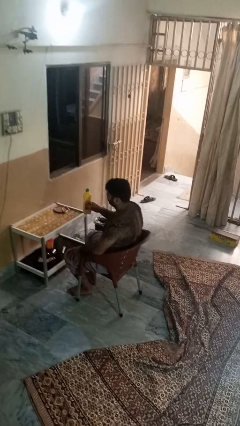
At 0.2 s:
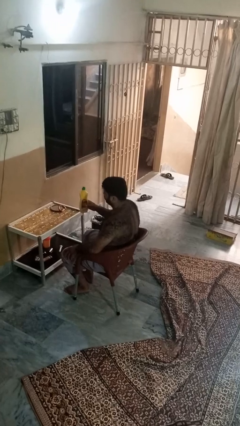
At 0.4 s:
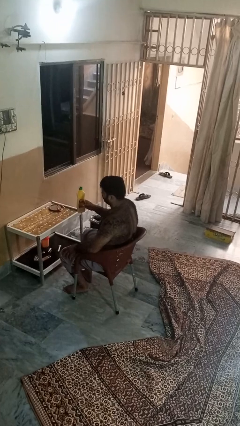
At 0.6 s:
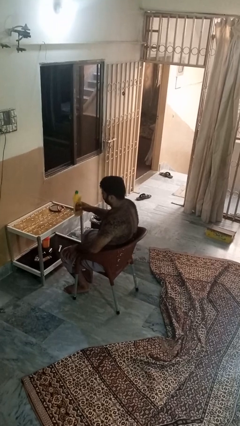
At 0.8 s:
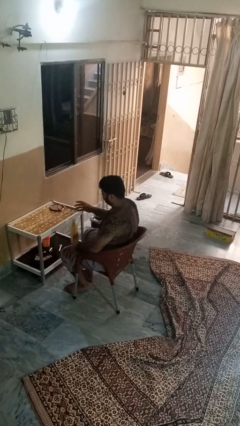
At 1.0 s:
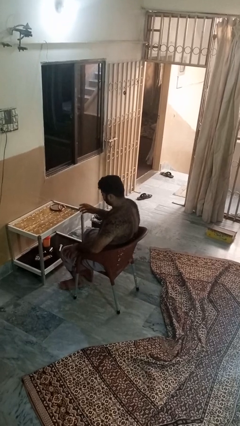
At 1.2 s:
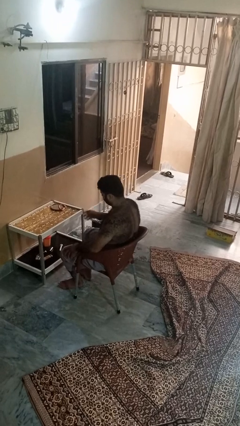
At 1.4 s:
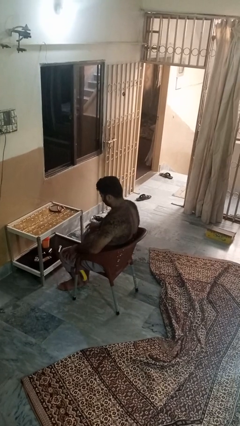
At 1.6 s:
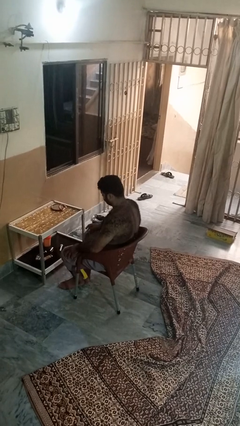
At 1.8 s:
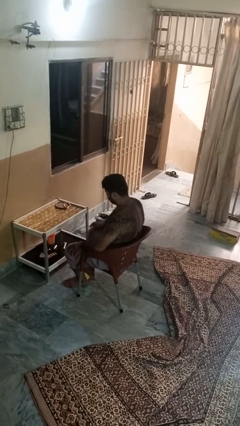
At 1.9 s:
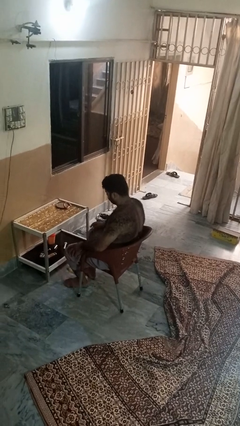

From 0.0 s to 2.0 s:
person throws object to ground

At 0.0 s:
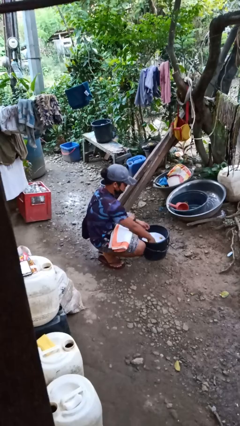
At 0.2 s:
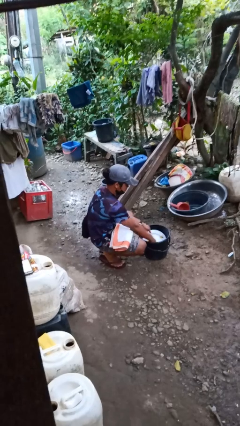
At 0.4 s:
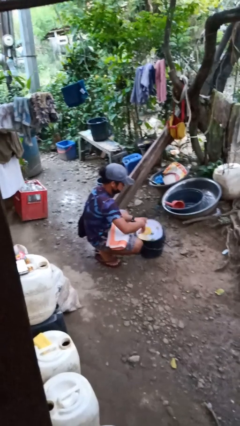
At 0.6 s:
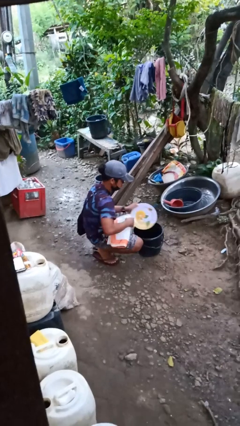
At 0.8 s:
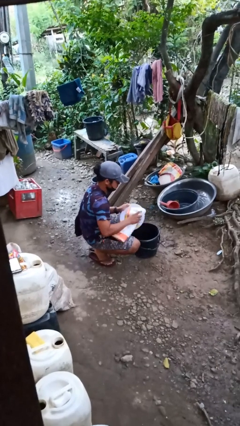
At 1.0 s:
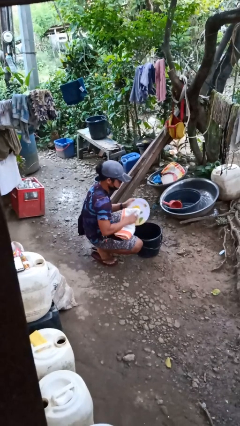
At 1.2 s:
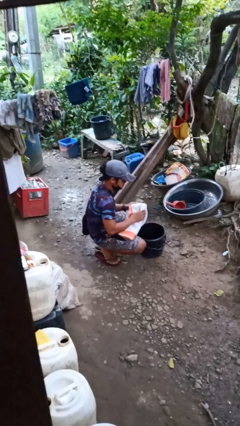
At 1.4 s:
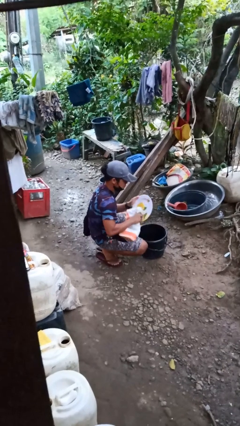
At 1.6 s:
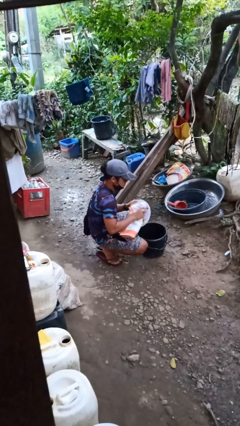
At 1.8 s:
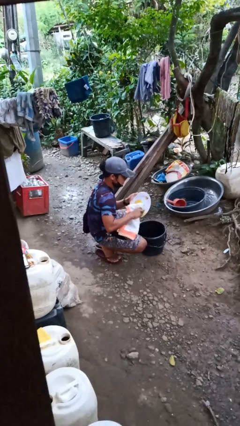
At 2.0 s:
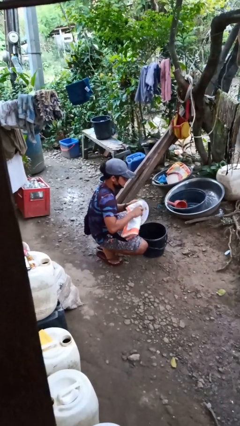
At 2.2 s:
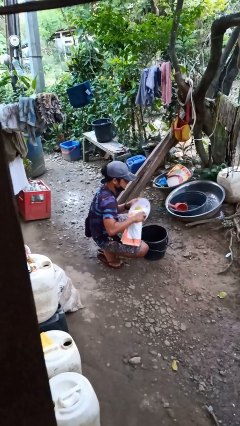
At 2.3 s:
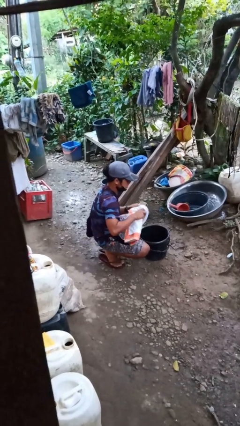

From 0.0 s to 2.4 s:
person dries dish

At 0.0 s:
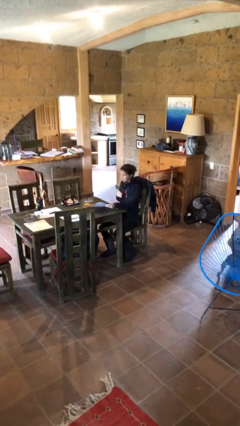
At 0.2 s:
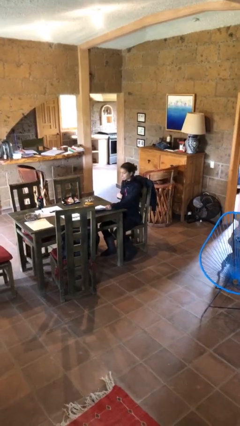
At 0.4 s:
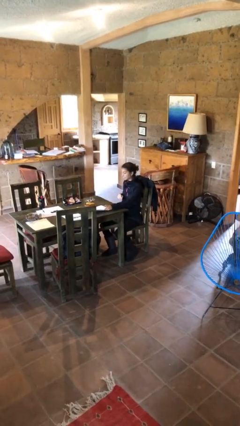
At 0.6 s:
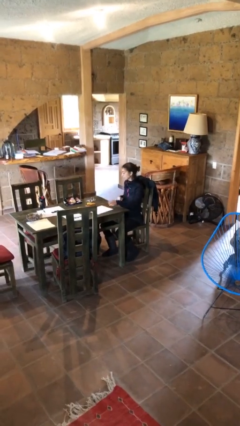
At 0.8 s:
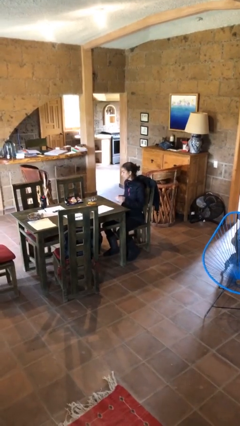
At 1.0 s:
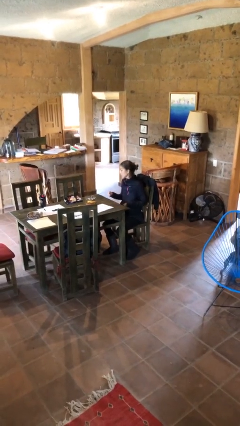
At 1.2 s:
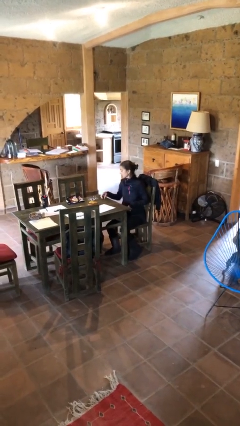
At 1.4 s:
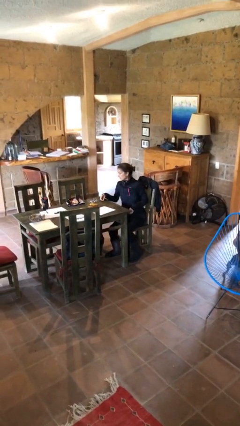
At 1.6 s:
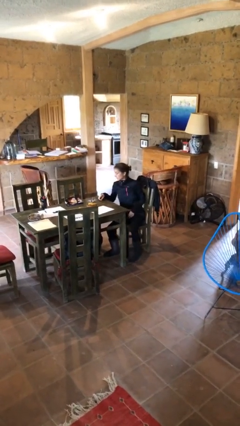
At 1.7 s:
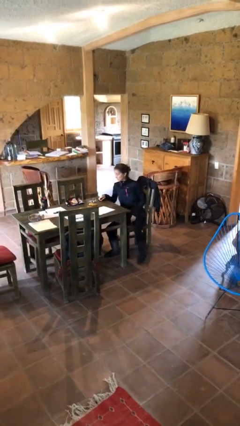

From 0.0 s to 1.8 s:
person puts down object on table

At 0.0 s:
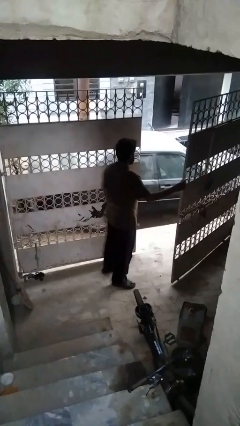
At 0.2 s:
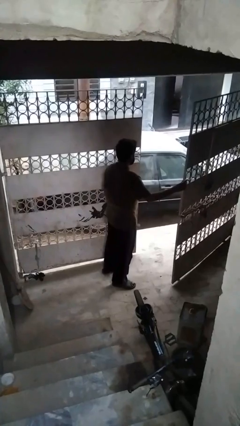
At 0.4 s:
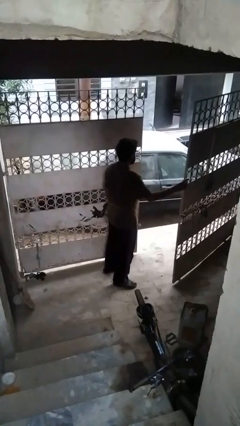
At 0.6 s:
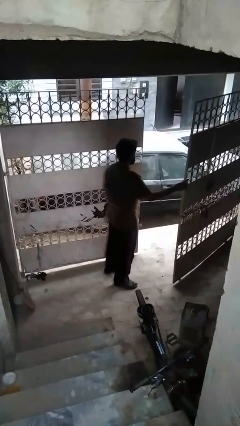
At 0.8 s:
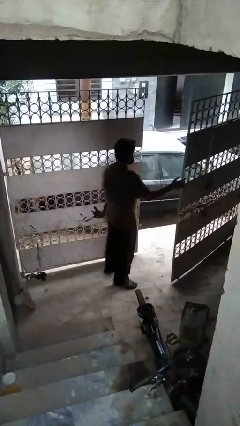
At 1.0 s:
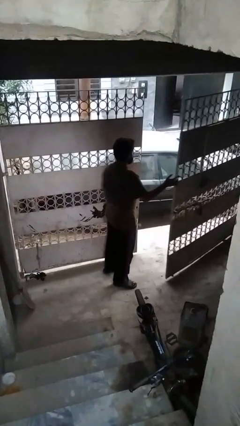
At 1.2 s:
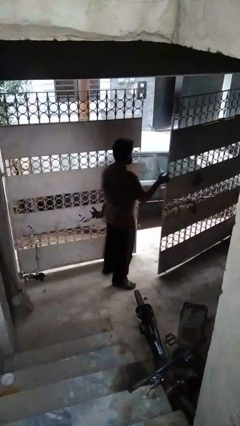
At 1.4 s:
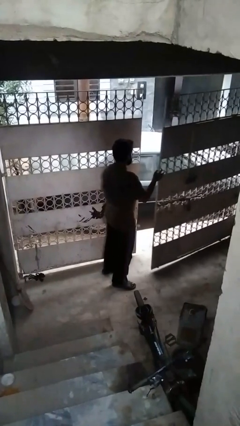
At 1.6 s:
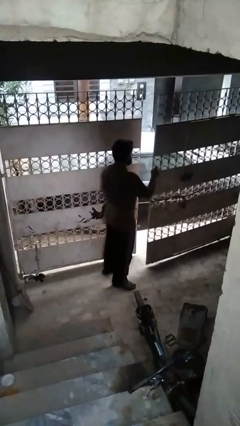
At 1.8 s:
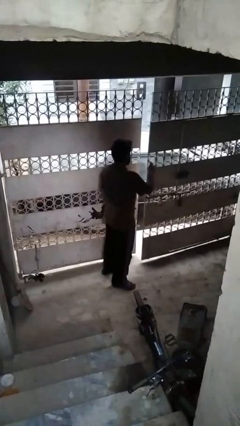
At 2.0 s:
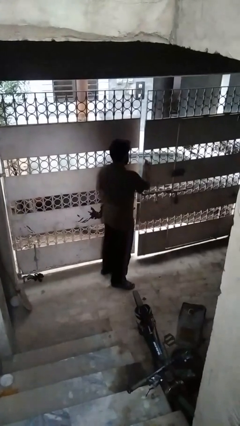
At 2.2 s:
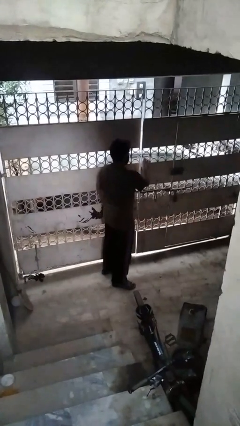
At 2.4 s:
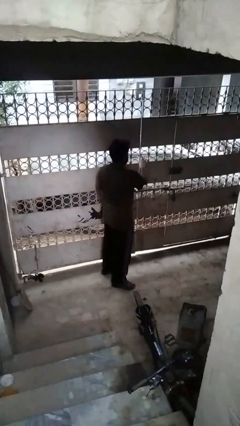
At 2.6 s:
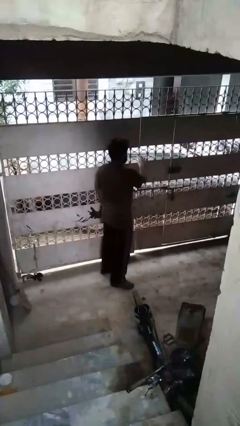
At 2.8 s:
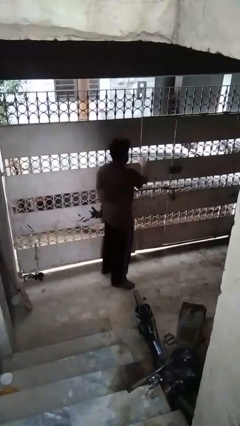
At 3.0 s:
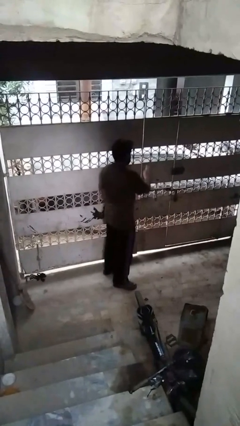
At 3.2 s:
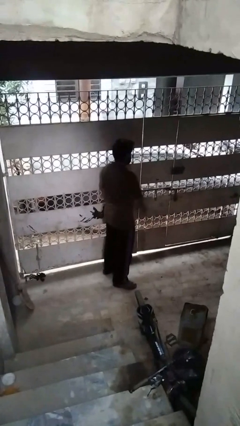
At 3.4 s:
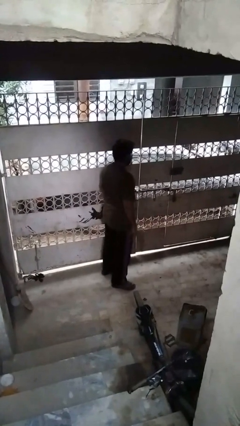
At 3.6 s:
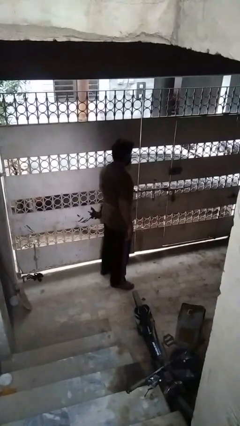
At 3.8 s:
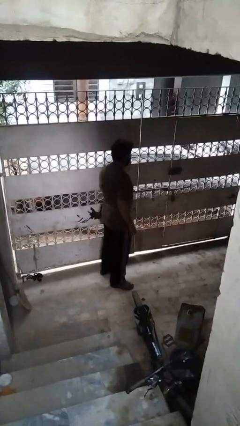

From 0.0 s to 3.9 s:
person closes gate

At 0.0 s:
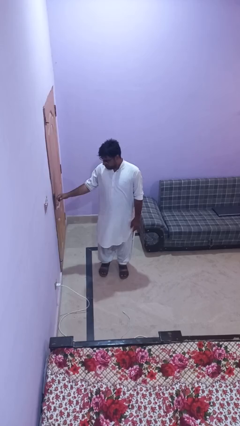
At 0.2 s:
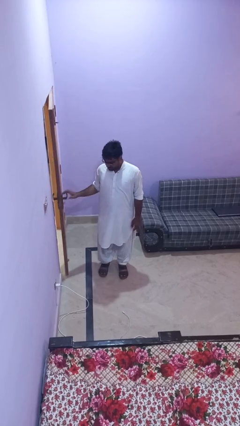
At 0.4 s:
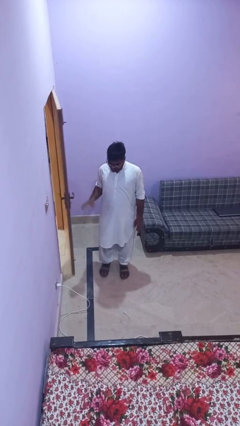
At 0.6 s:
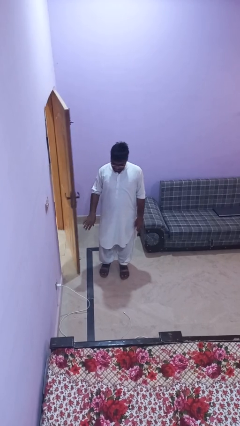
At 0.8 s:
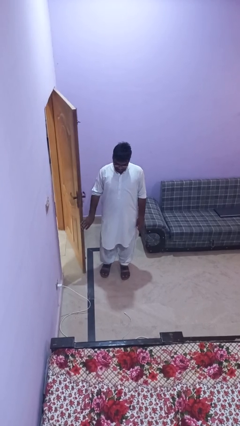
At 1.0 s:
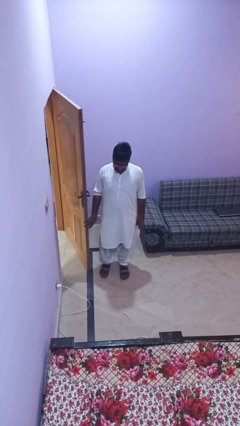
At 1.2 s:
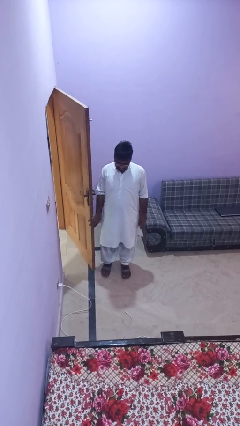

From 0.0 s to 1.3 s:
person opens facility door

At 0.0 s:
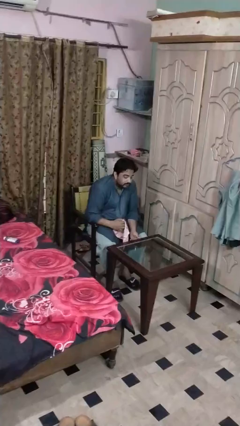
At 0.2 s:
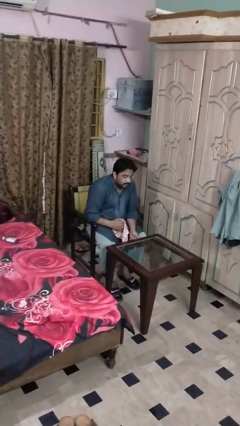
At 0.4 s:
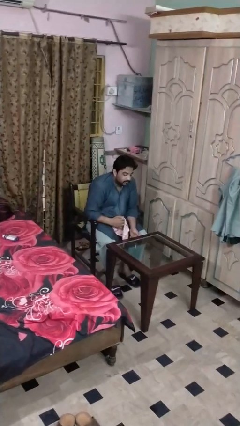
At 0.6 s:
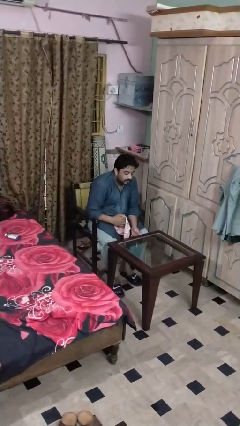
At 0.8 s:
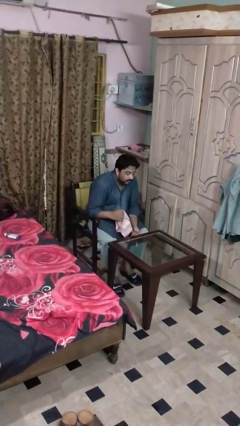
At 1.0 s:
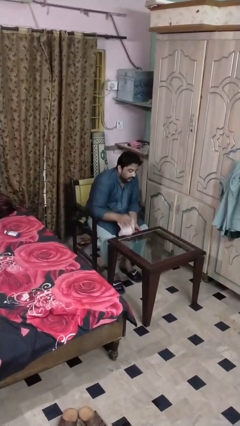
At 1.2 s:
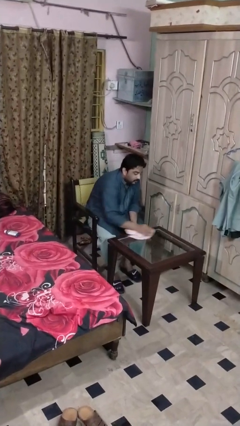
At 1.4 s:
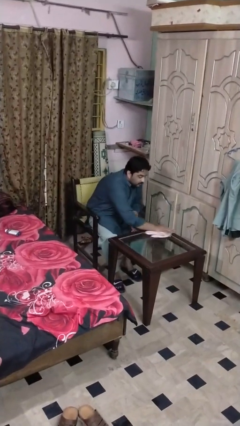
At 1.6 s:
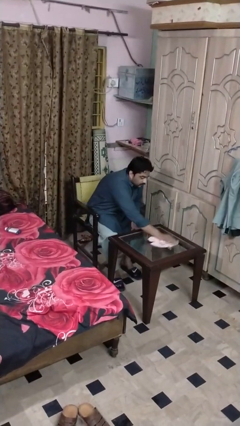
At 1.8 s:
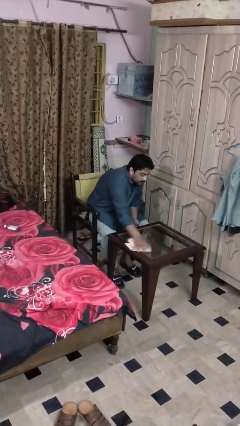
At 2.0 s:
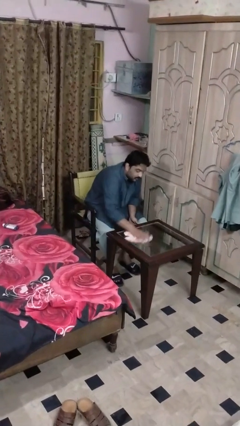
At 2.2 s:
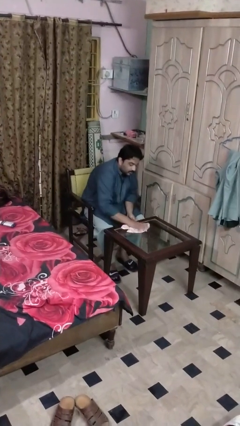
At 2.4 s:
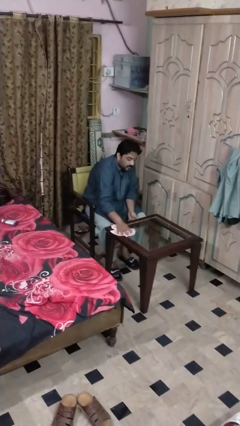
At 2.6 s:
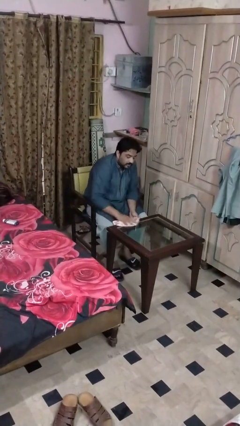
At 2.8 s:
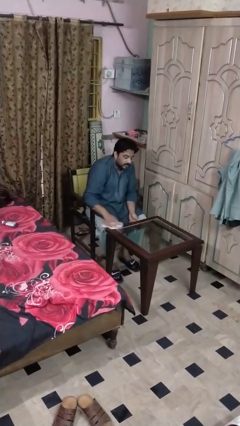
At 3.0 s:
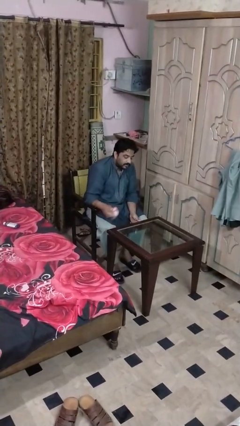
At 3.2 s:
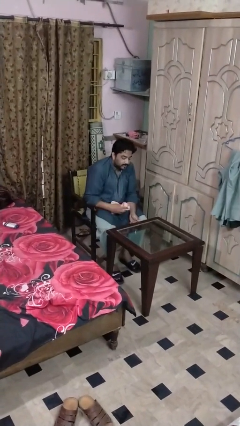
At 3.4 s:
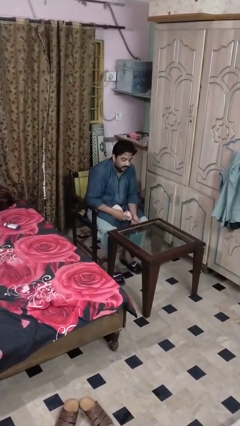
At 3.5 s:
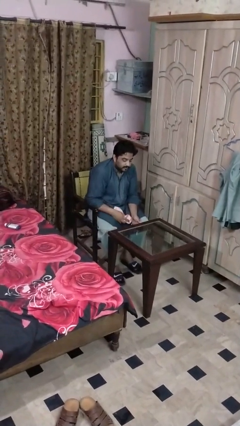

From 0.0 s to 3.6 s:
person cleans table with rag

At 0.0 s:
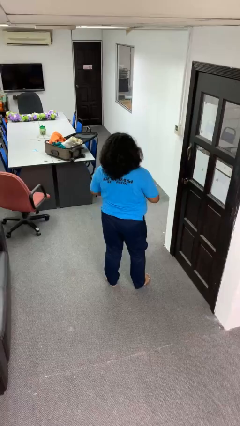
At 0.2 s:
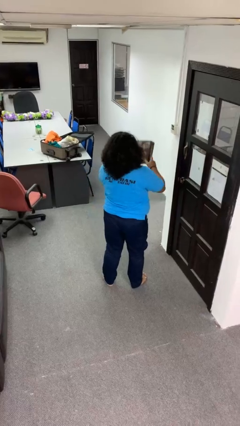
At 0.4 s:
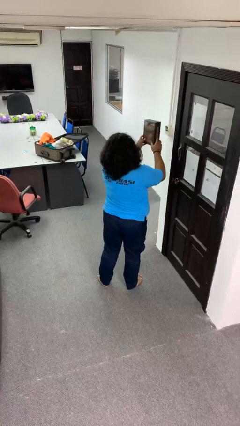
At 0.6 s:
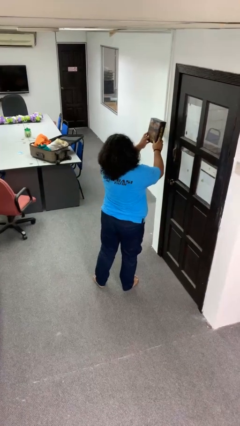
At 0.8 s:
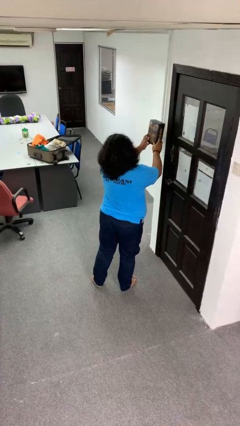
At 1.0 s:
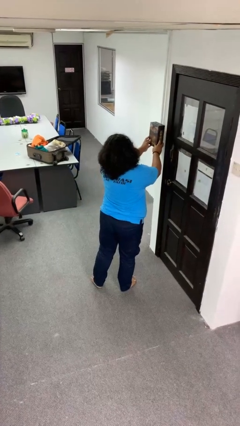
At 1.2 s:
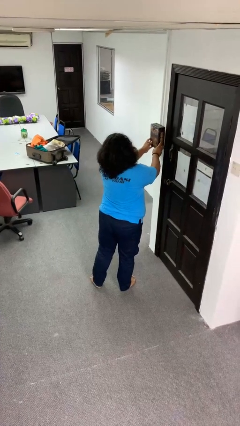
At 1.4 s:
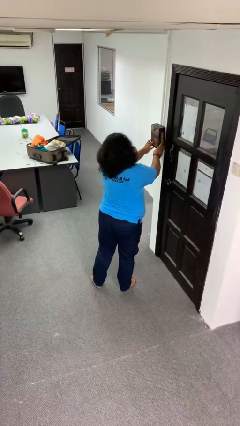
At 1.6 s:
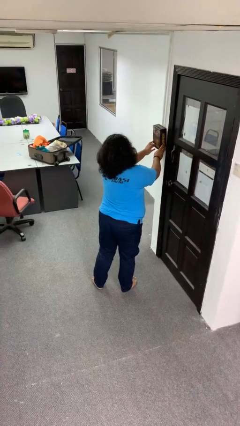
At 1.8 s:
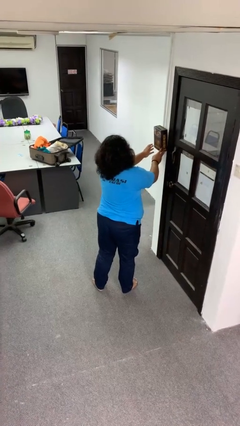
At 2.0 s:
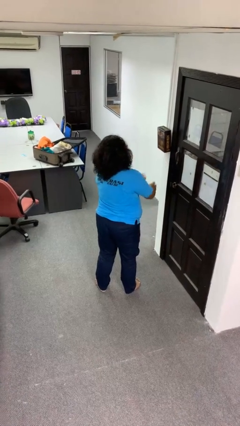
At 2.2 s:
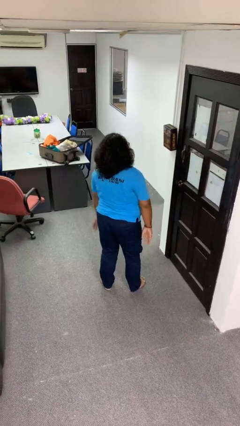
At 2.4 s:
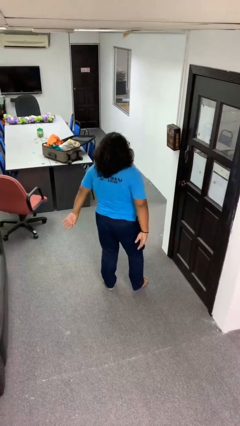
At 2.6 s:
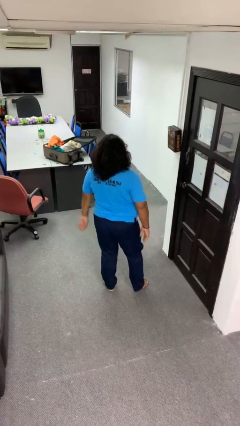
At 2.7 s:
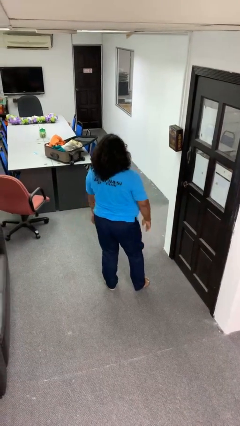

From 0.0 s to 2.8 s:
person puts up picture frame
